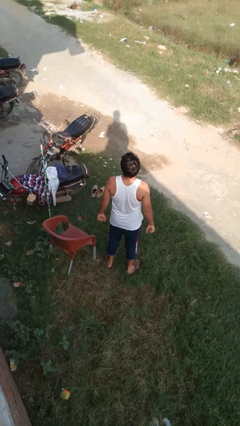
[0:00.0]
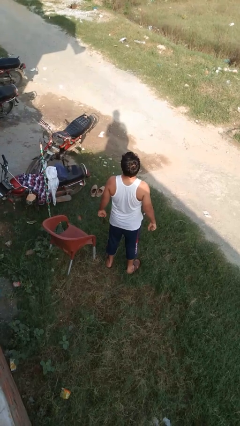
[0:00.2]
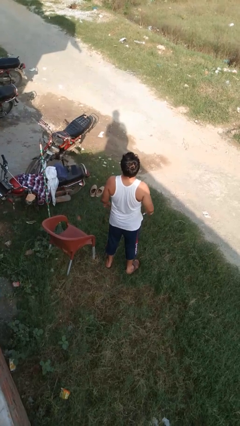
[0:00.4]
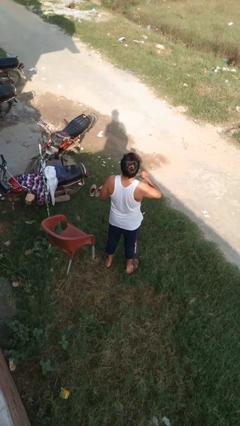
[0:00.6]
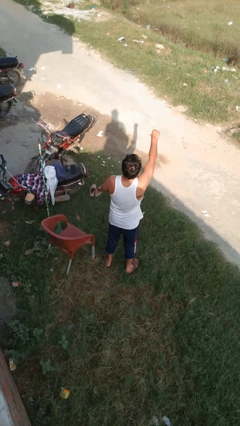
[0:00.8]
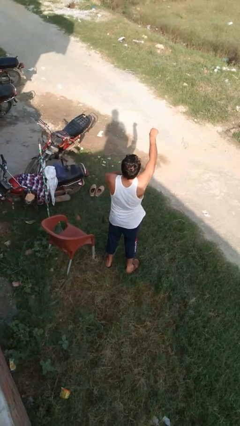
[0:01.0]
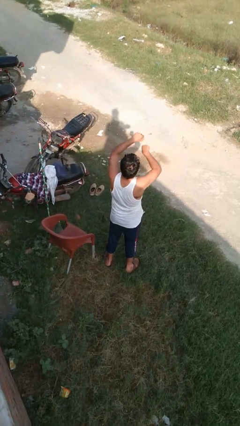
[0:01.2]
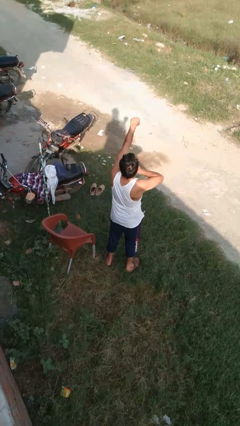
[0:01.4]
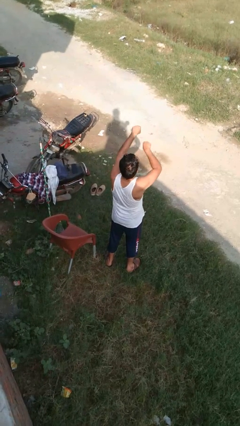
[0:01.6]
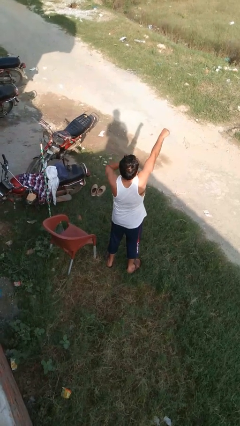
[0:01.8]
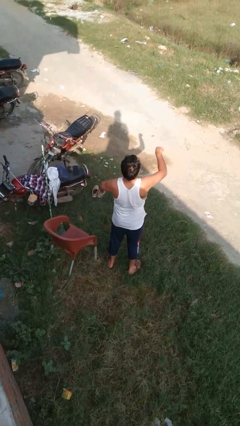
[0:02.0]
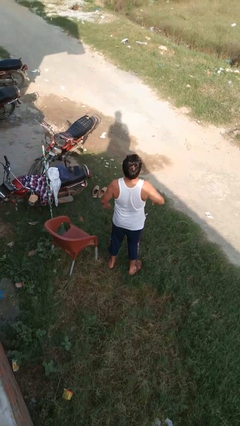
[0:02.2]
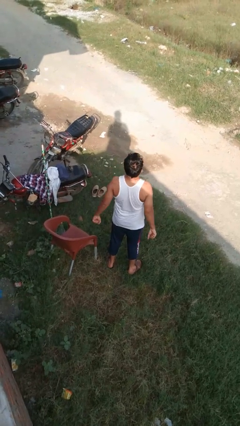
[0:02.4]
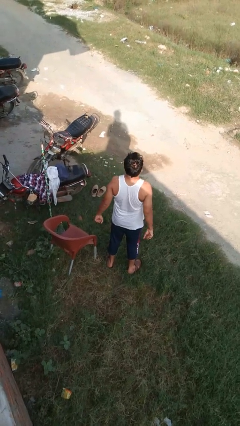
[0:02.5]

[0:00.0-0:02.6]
person punches

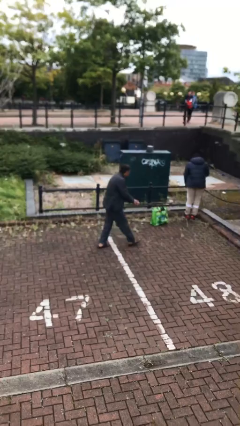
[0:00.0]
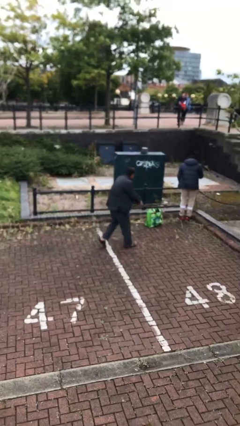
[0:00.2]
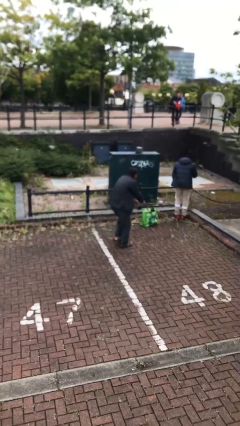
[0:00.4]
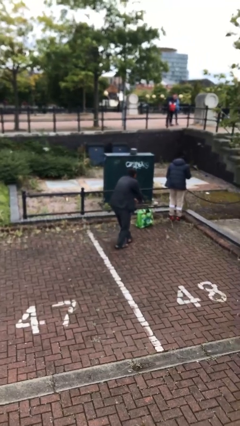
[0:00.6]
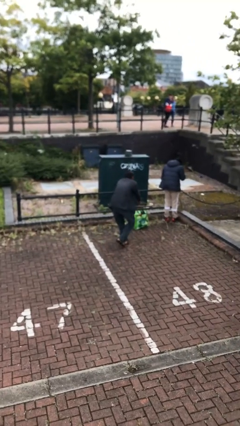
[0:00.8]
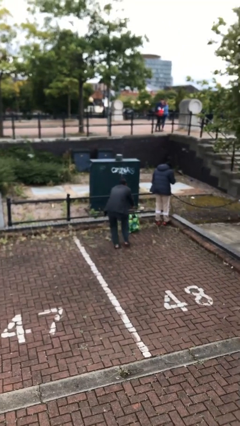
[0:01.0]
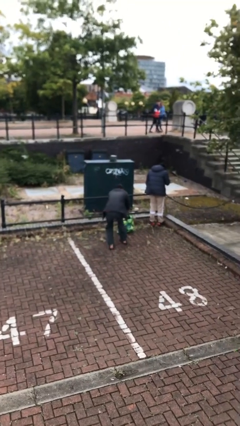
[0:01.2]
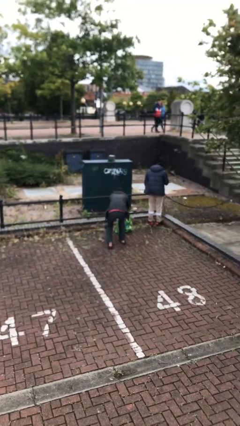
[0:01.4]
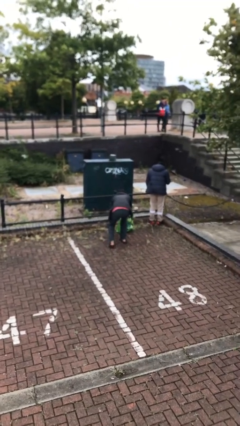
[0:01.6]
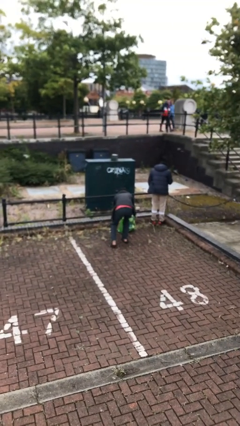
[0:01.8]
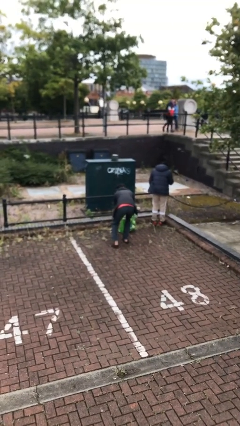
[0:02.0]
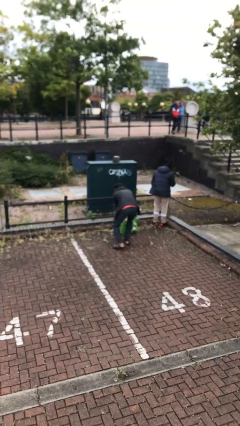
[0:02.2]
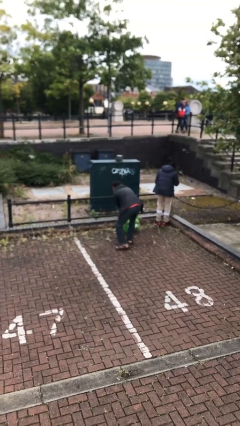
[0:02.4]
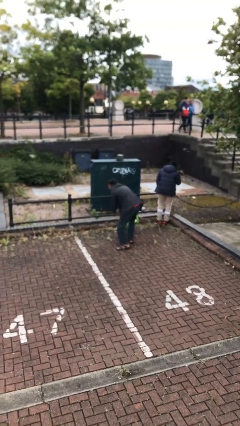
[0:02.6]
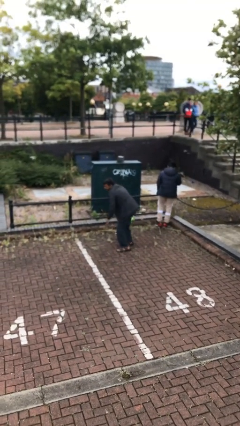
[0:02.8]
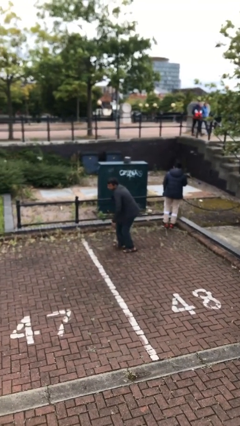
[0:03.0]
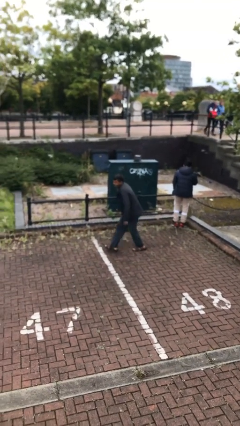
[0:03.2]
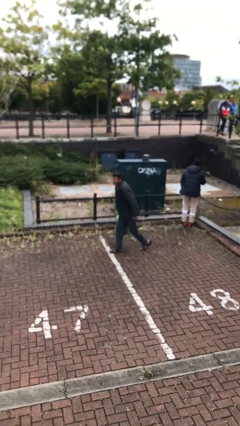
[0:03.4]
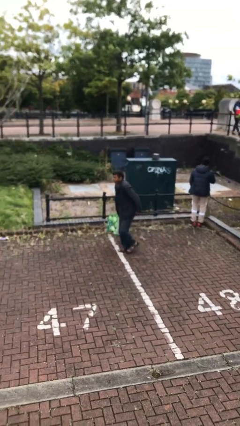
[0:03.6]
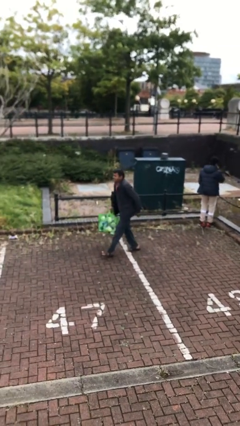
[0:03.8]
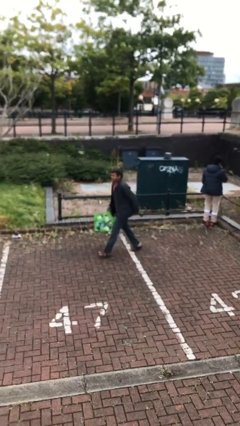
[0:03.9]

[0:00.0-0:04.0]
person steals object from person

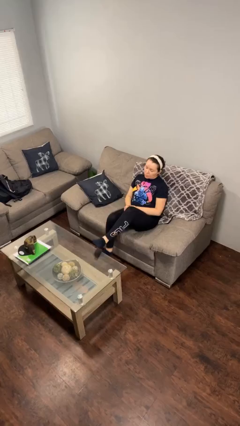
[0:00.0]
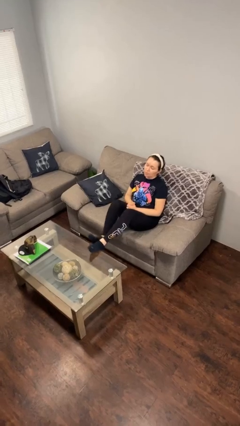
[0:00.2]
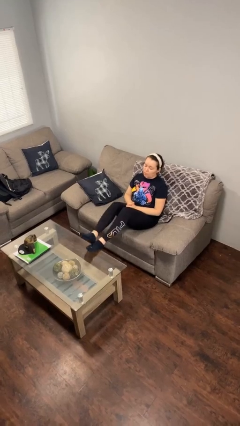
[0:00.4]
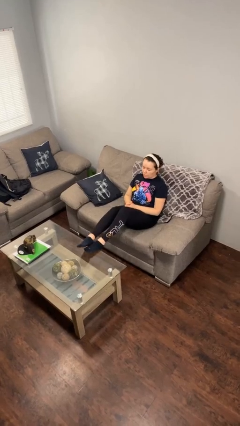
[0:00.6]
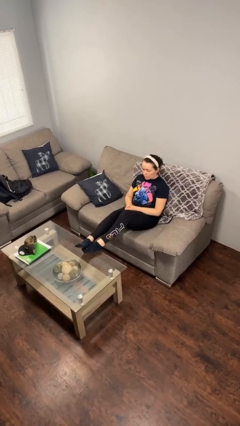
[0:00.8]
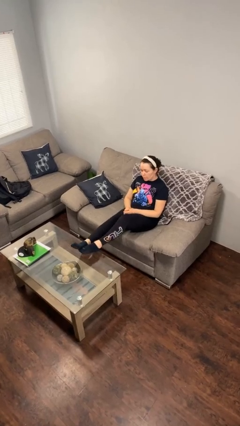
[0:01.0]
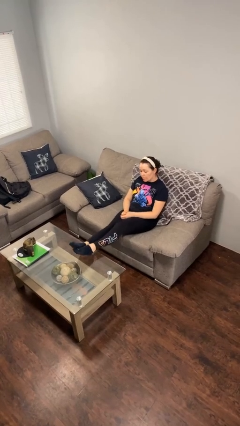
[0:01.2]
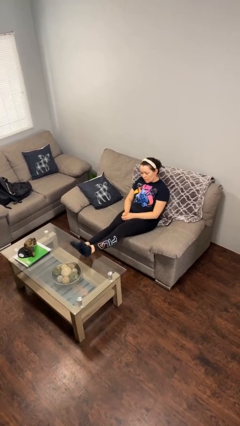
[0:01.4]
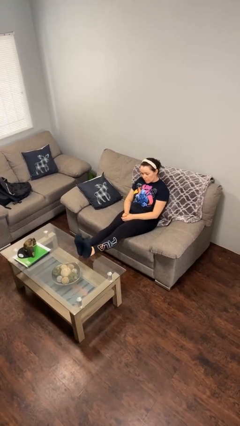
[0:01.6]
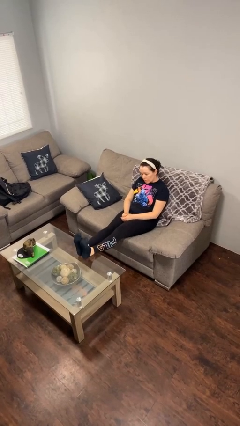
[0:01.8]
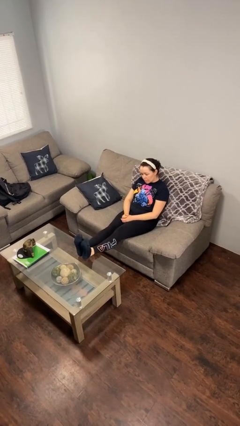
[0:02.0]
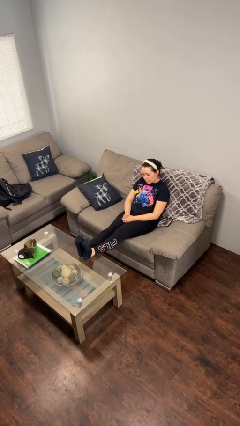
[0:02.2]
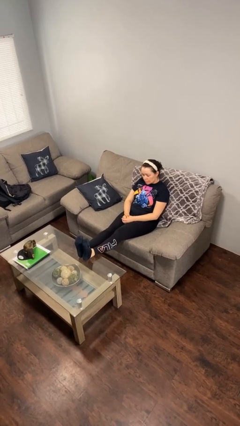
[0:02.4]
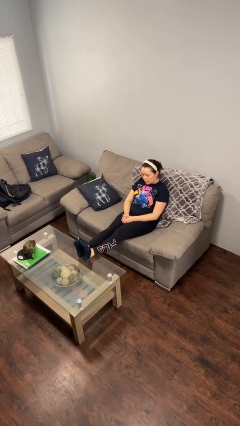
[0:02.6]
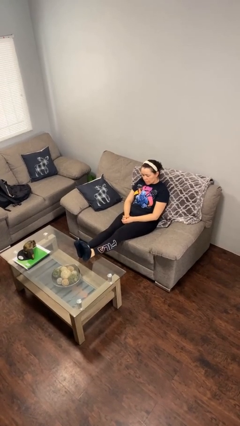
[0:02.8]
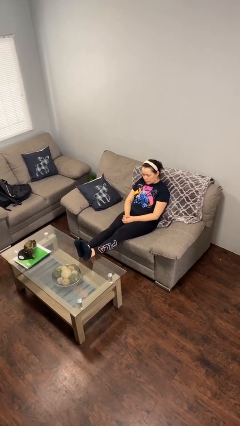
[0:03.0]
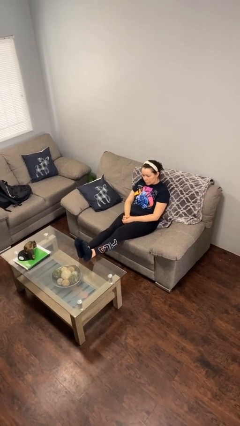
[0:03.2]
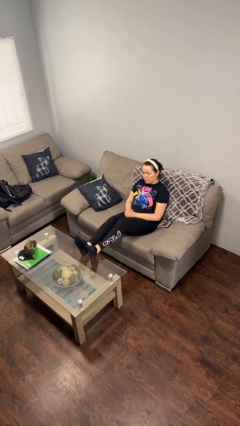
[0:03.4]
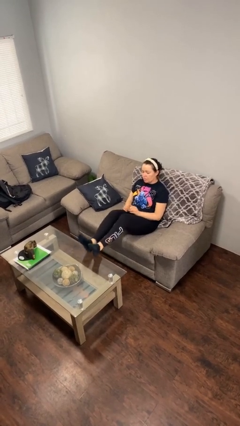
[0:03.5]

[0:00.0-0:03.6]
person puts feet up

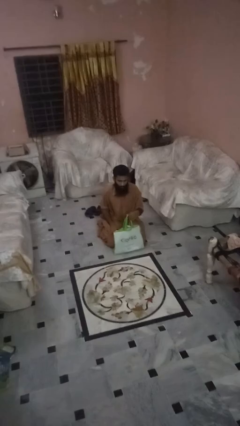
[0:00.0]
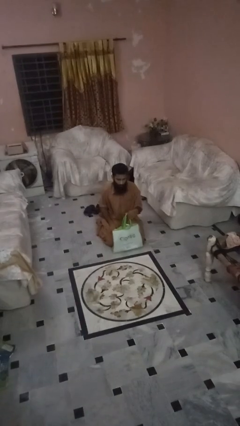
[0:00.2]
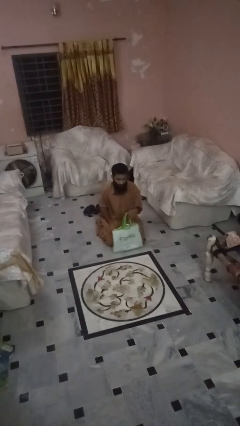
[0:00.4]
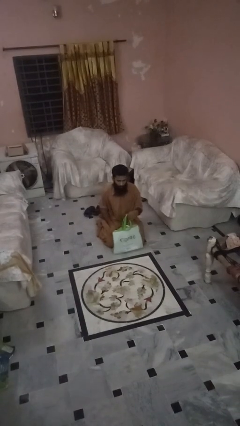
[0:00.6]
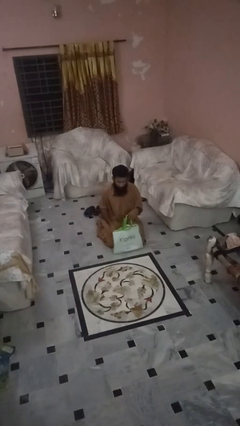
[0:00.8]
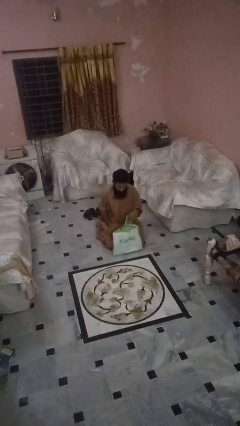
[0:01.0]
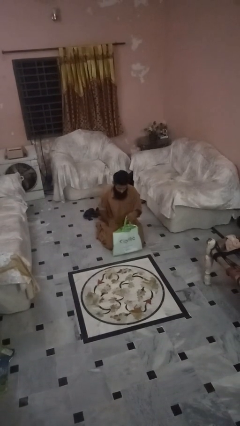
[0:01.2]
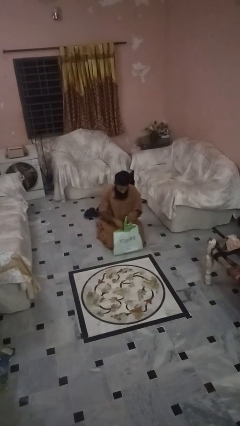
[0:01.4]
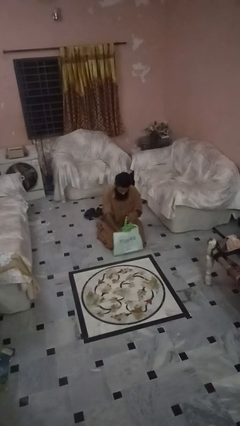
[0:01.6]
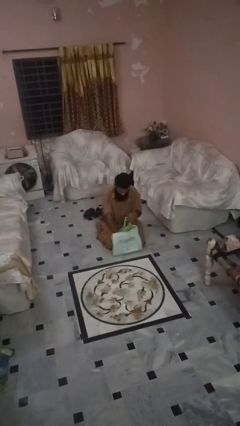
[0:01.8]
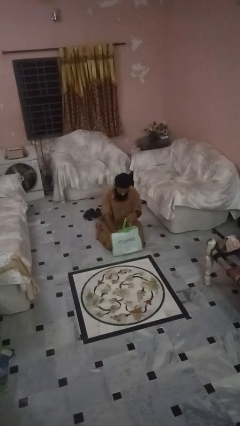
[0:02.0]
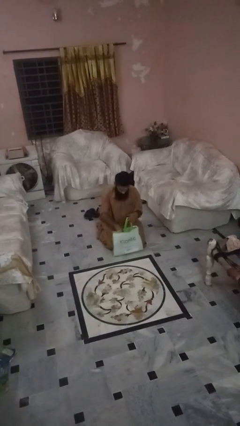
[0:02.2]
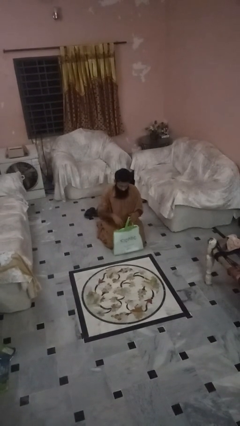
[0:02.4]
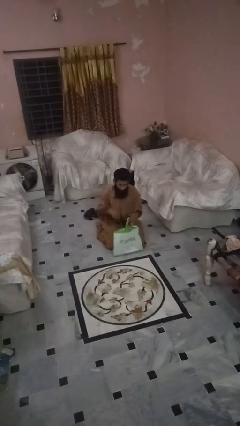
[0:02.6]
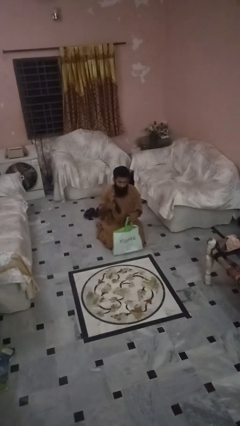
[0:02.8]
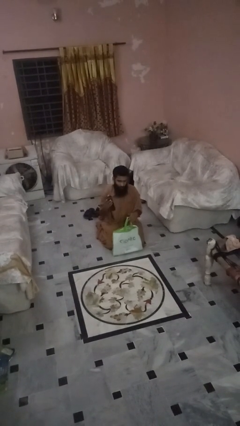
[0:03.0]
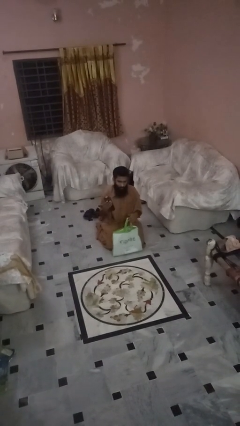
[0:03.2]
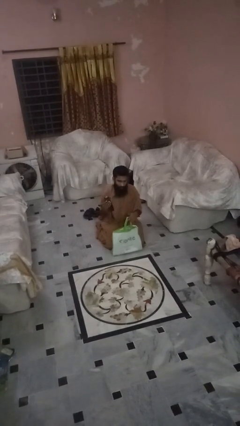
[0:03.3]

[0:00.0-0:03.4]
person takes object from bag

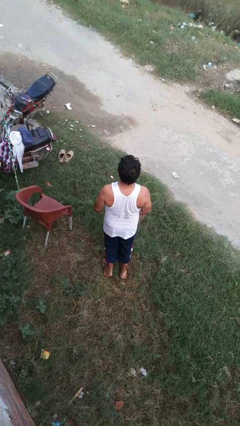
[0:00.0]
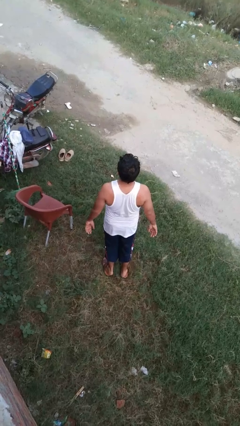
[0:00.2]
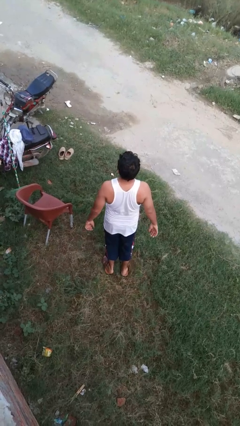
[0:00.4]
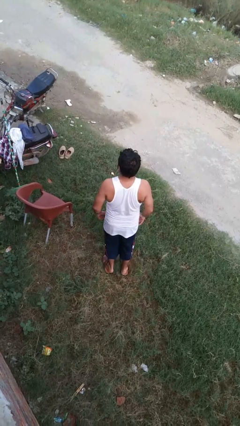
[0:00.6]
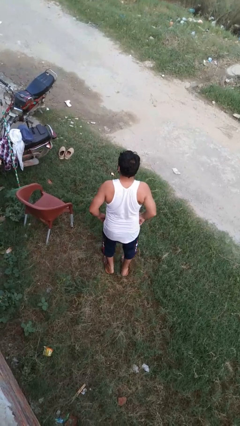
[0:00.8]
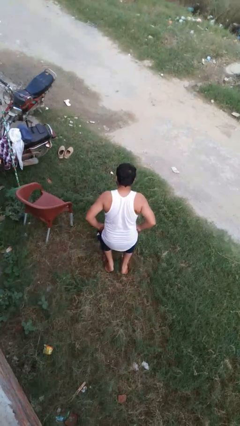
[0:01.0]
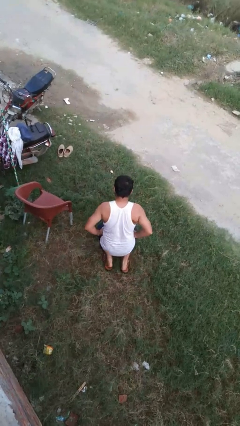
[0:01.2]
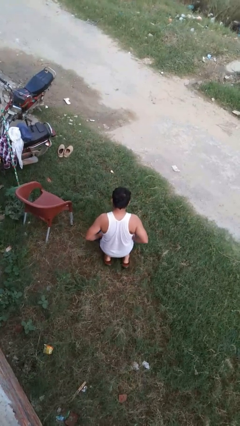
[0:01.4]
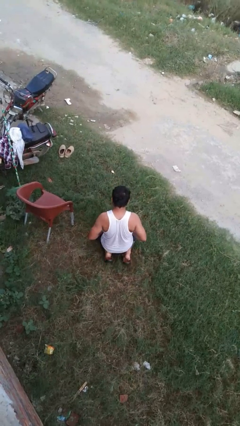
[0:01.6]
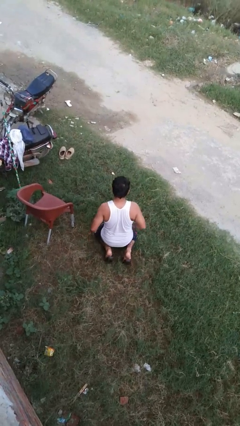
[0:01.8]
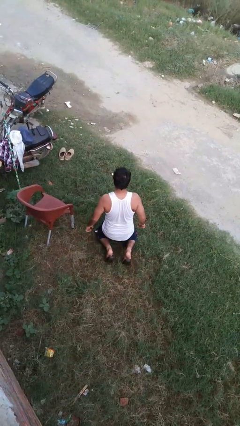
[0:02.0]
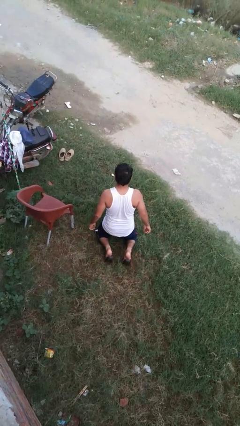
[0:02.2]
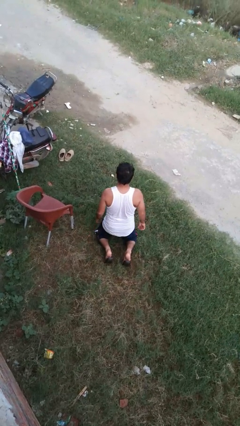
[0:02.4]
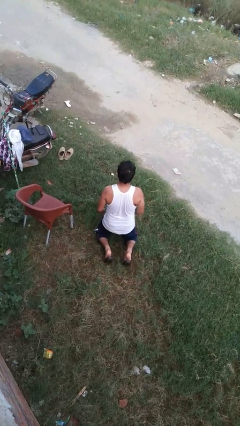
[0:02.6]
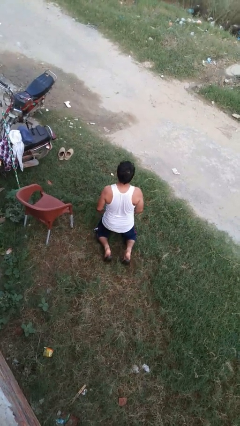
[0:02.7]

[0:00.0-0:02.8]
person kneels

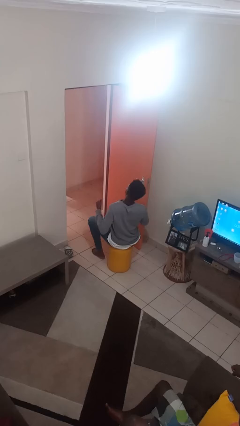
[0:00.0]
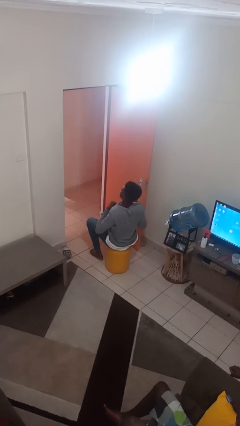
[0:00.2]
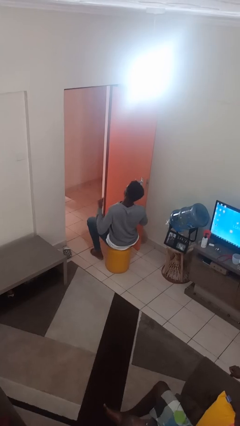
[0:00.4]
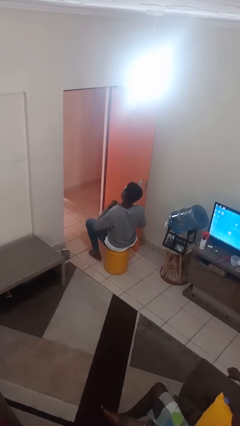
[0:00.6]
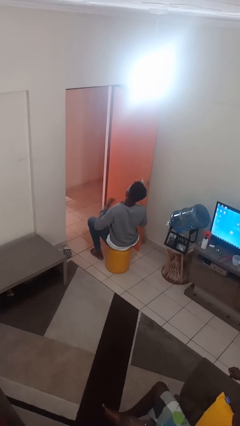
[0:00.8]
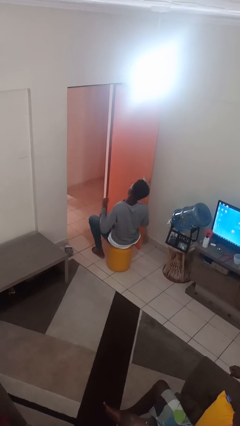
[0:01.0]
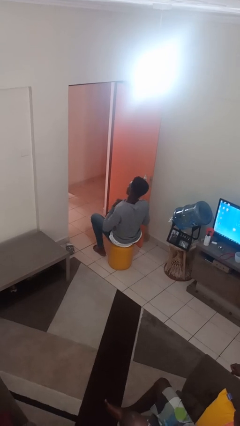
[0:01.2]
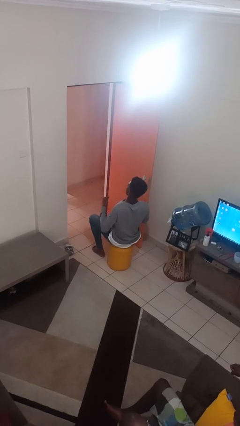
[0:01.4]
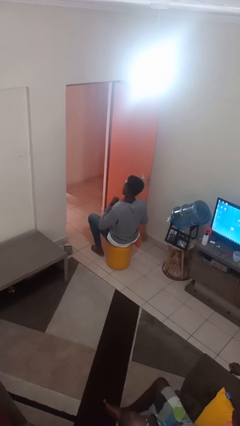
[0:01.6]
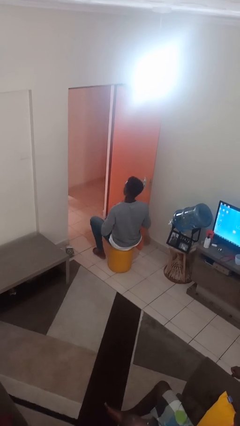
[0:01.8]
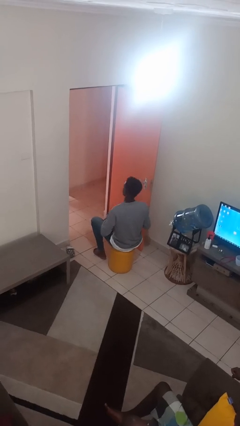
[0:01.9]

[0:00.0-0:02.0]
person drums on chest
